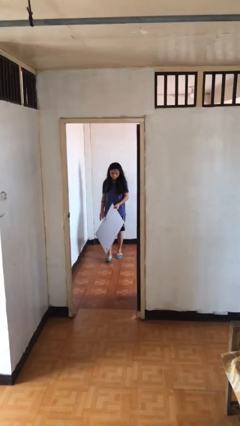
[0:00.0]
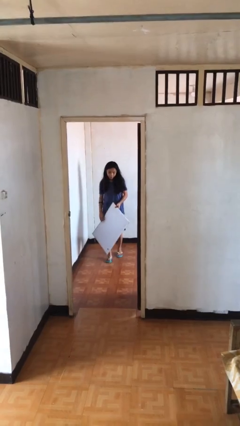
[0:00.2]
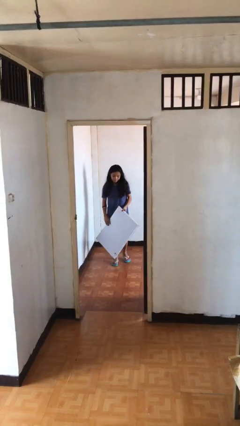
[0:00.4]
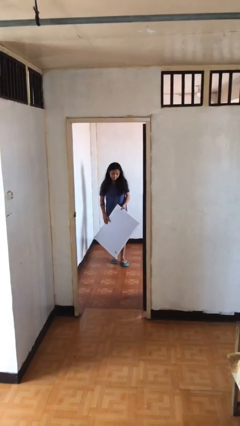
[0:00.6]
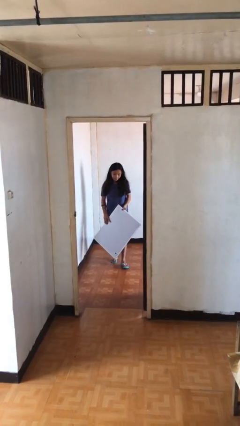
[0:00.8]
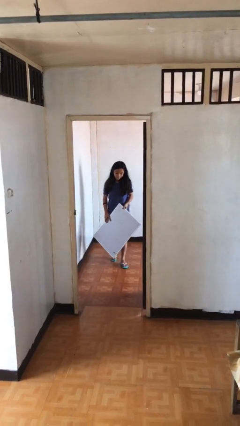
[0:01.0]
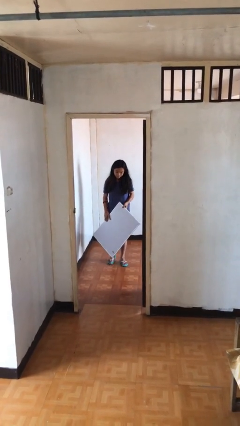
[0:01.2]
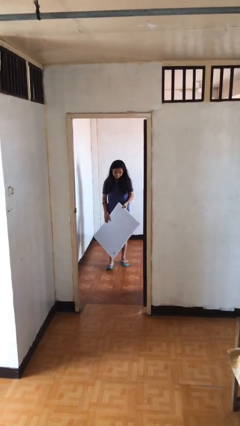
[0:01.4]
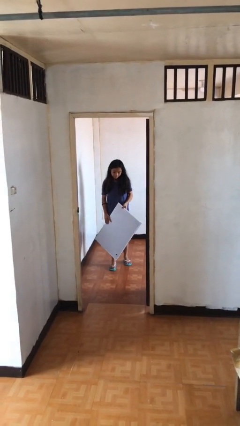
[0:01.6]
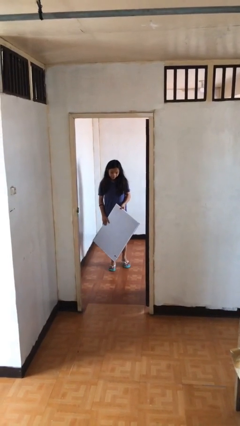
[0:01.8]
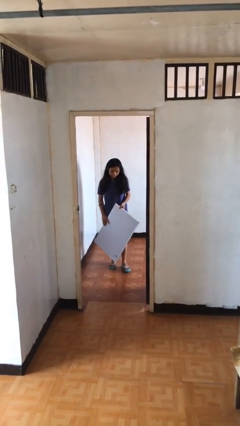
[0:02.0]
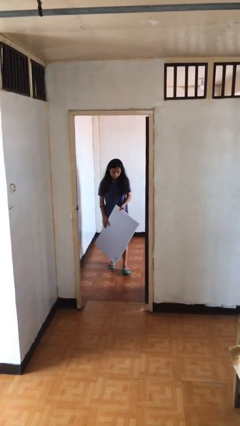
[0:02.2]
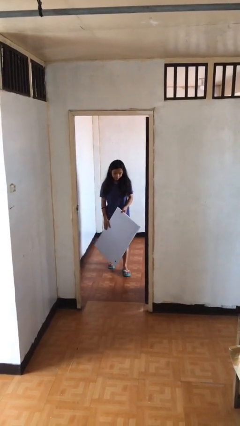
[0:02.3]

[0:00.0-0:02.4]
person carries heavy object

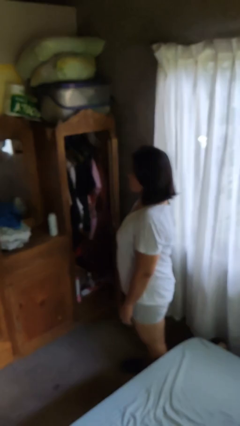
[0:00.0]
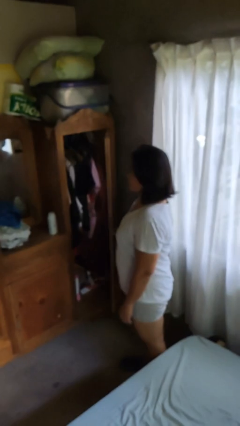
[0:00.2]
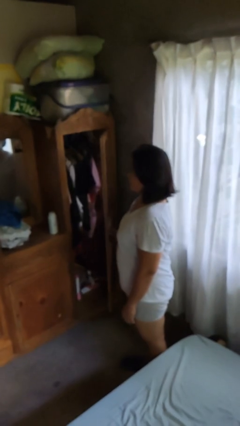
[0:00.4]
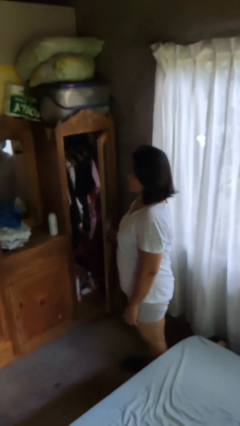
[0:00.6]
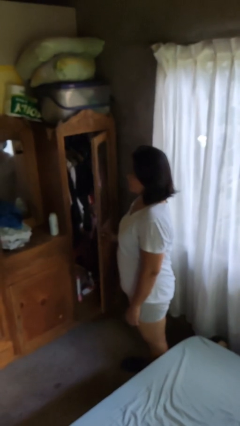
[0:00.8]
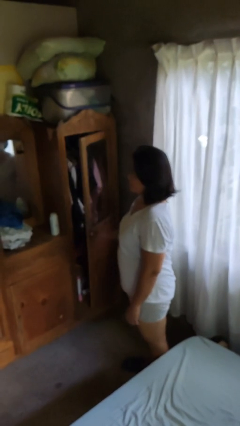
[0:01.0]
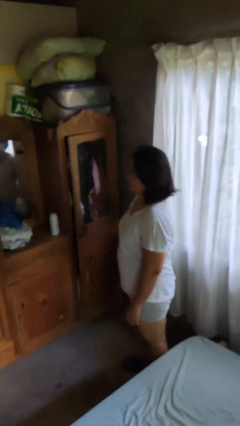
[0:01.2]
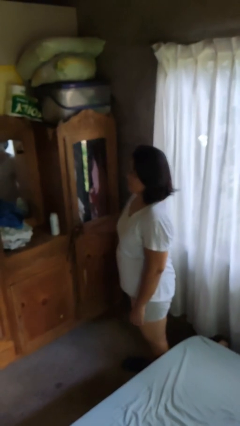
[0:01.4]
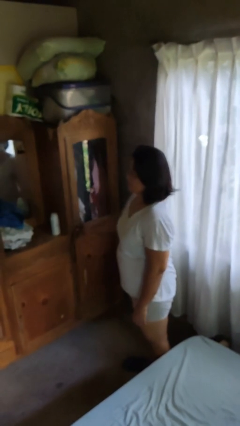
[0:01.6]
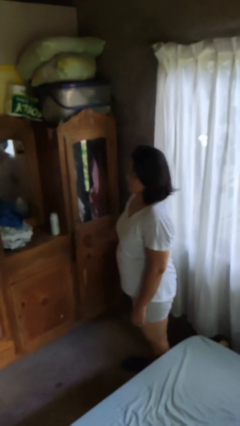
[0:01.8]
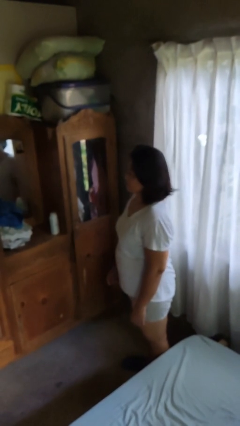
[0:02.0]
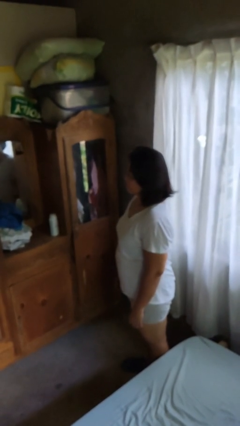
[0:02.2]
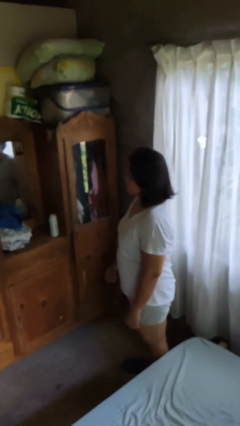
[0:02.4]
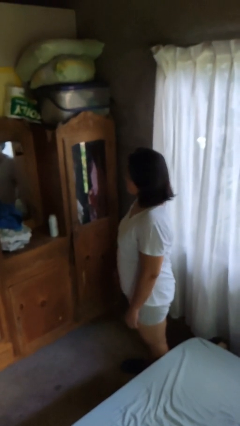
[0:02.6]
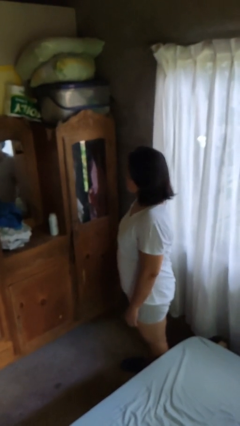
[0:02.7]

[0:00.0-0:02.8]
person closes dresser drawer
